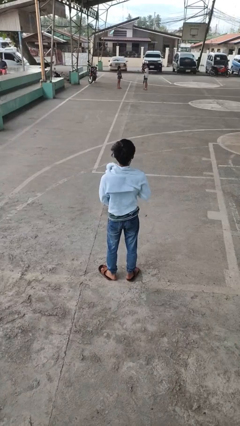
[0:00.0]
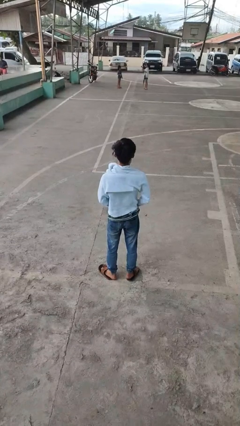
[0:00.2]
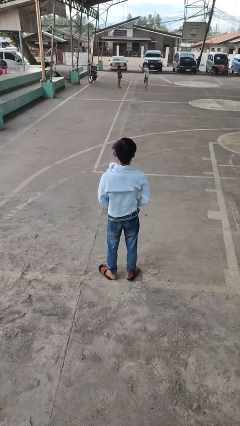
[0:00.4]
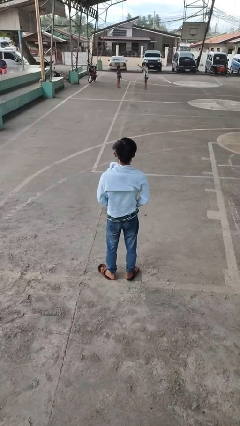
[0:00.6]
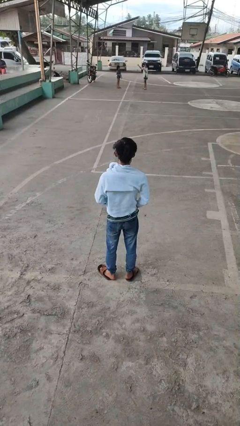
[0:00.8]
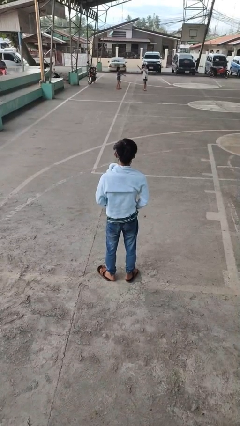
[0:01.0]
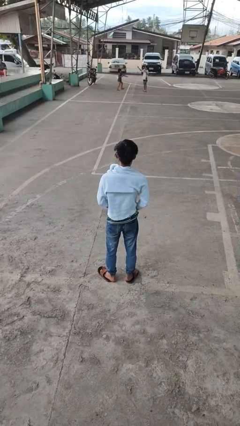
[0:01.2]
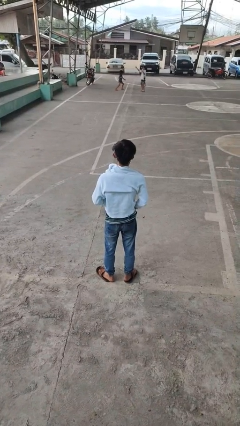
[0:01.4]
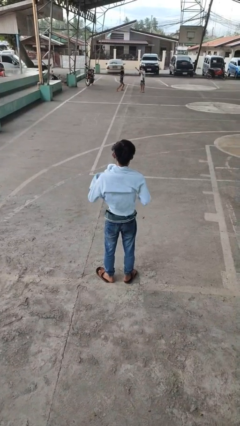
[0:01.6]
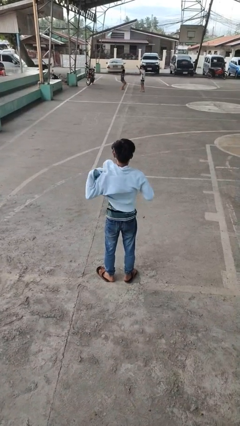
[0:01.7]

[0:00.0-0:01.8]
person unzips jacket

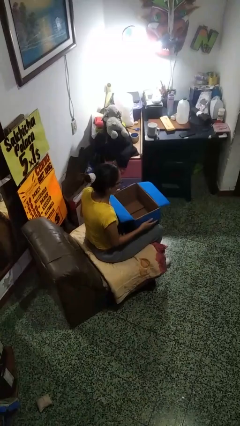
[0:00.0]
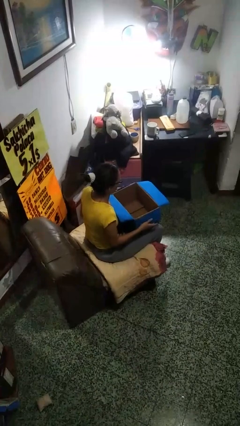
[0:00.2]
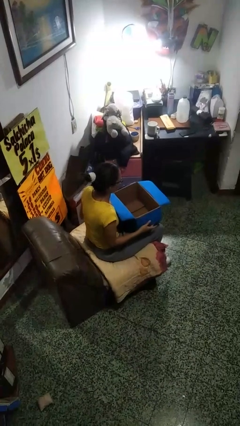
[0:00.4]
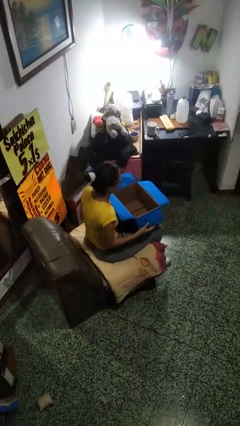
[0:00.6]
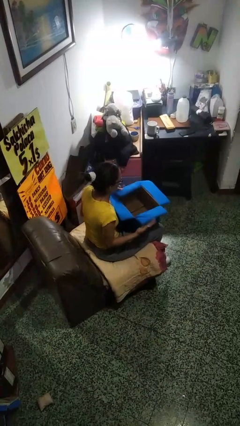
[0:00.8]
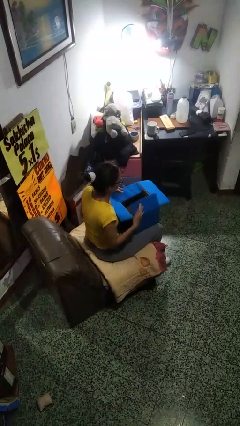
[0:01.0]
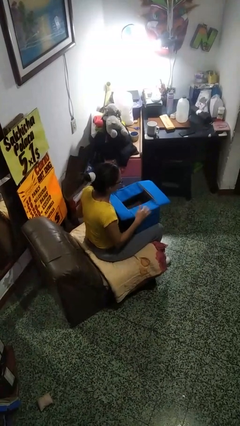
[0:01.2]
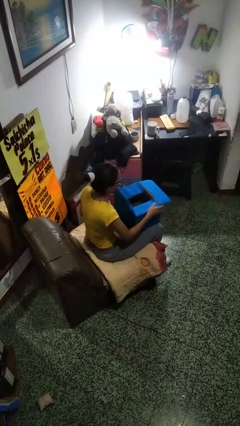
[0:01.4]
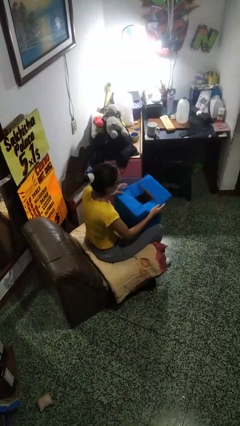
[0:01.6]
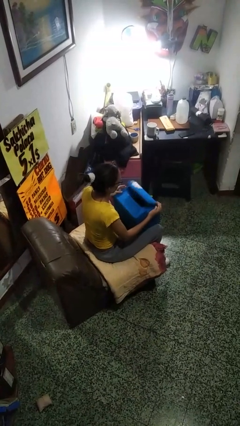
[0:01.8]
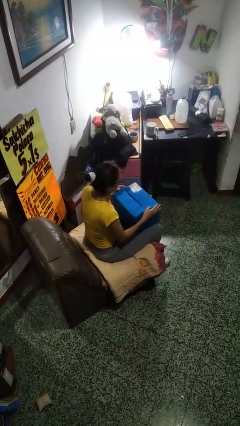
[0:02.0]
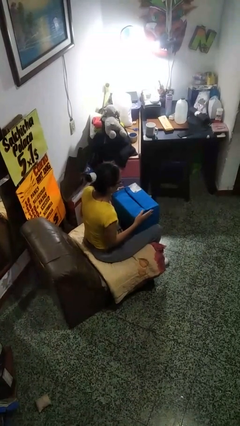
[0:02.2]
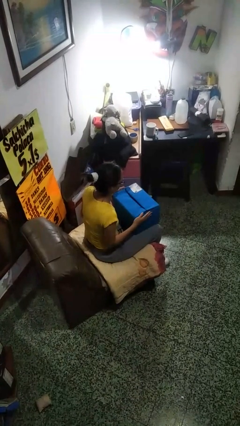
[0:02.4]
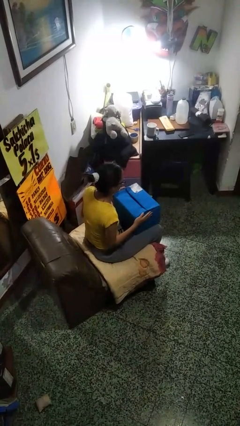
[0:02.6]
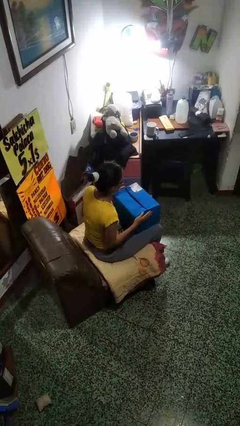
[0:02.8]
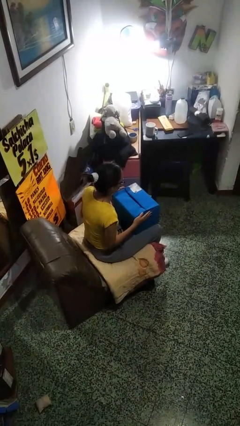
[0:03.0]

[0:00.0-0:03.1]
person closes box

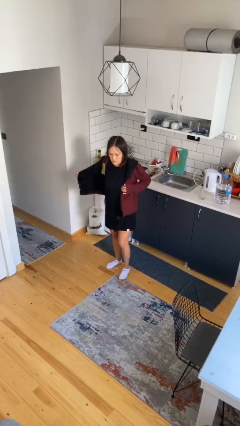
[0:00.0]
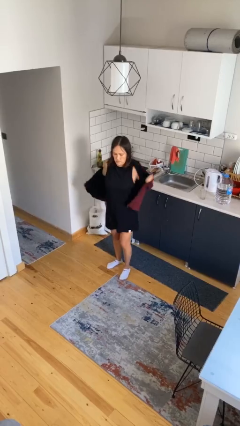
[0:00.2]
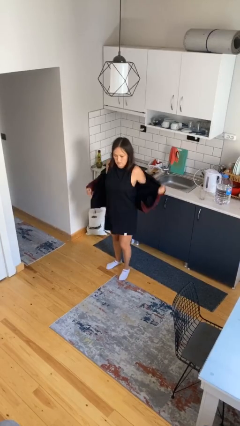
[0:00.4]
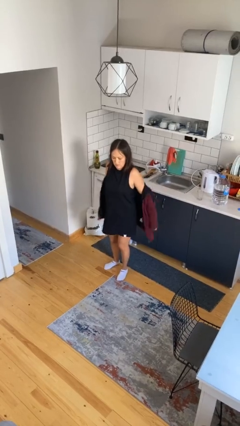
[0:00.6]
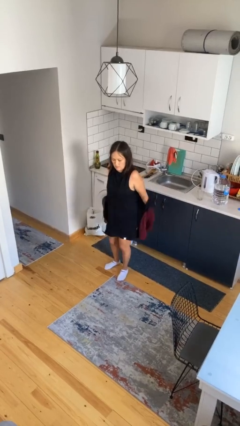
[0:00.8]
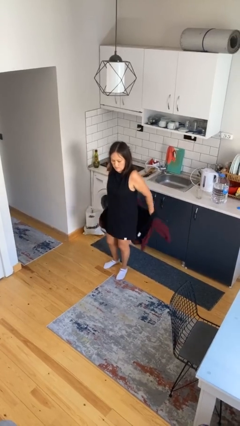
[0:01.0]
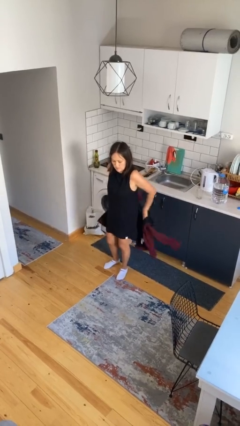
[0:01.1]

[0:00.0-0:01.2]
person takes off jacket

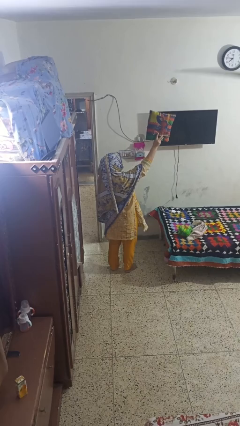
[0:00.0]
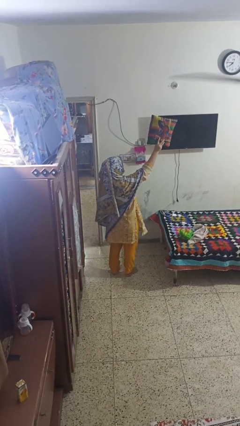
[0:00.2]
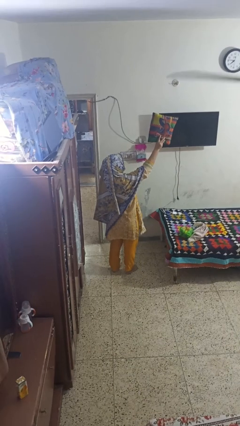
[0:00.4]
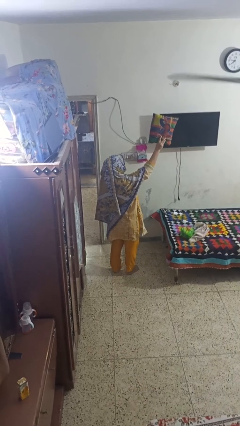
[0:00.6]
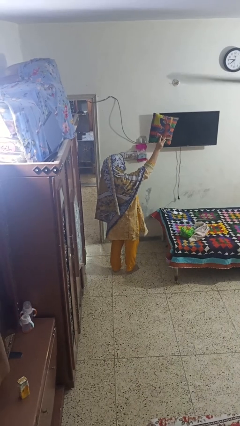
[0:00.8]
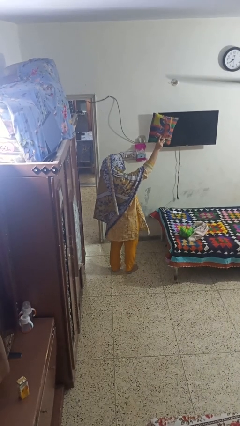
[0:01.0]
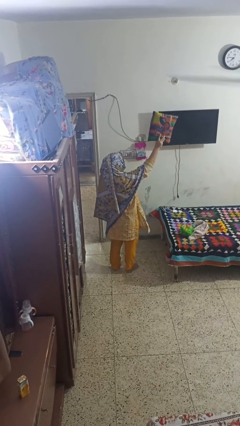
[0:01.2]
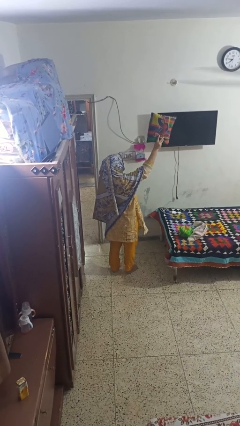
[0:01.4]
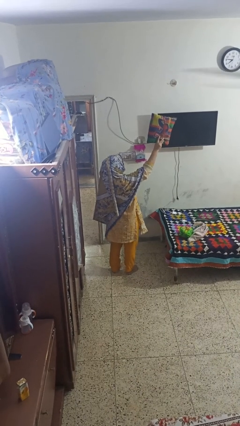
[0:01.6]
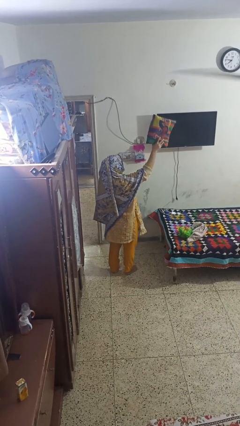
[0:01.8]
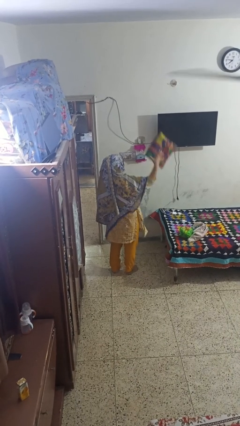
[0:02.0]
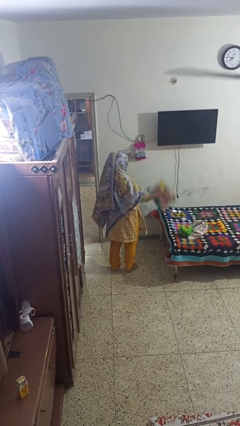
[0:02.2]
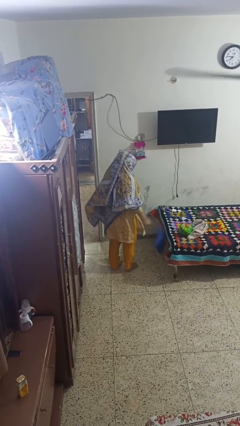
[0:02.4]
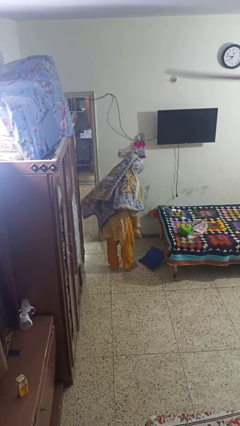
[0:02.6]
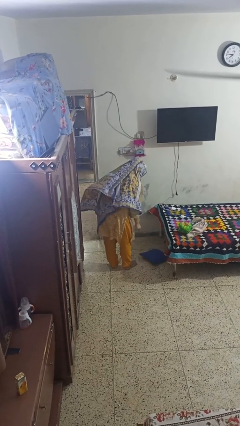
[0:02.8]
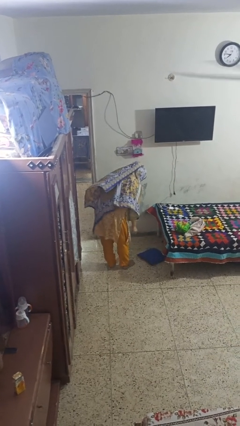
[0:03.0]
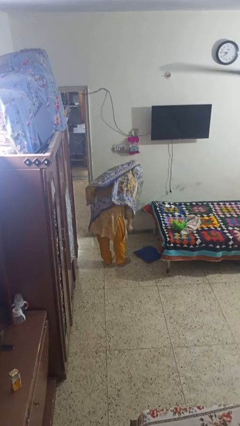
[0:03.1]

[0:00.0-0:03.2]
person drops object

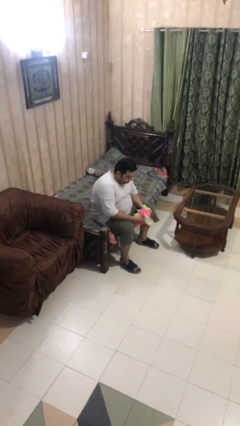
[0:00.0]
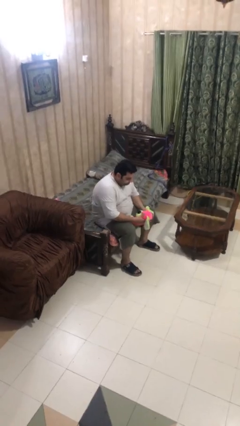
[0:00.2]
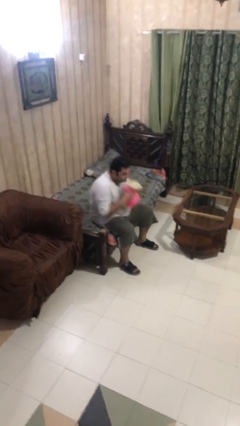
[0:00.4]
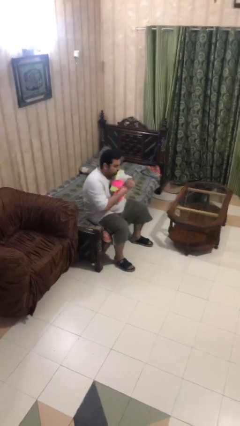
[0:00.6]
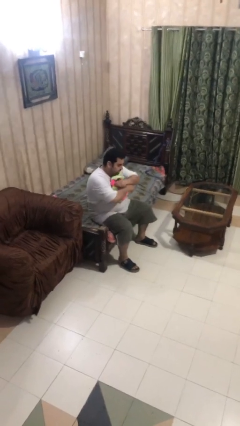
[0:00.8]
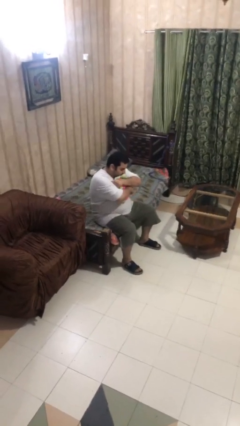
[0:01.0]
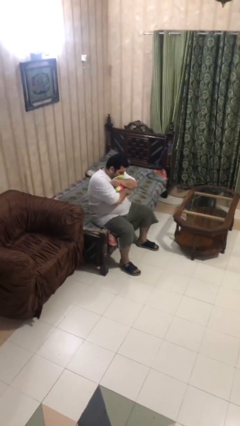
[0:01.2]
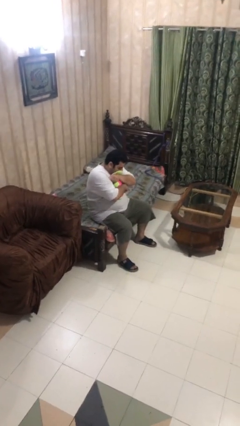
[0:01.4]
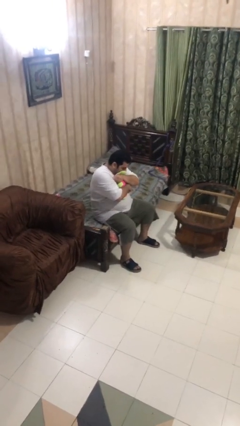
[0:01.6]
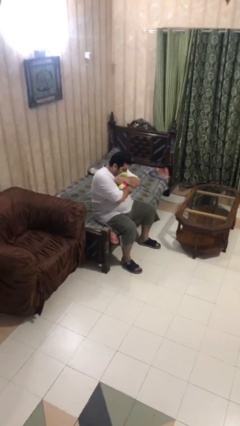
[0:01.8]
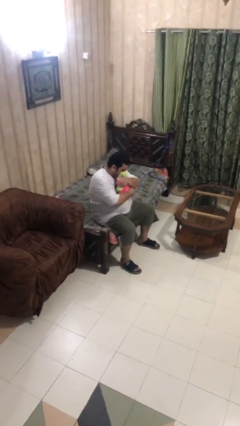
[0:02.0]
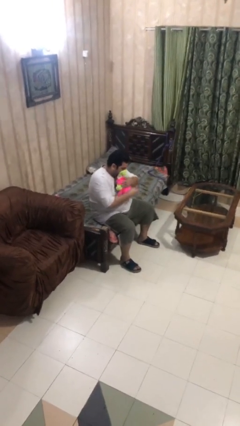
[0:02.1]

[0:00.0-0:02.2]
person hugs stuffed animal

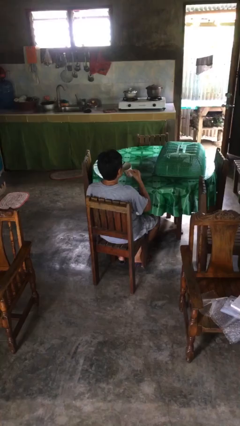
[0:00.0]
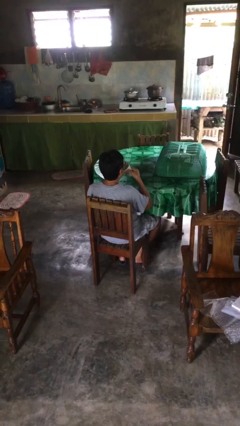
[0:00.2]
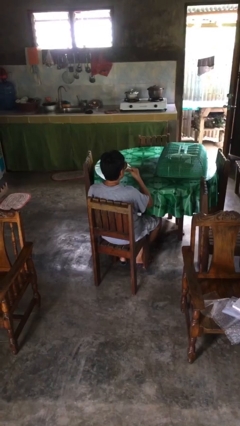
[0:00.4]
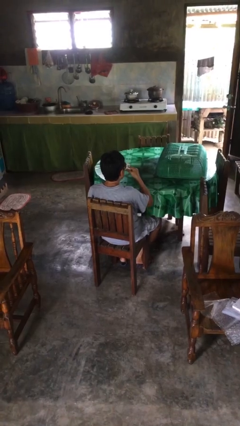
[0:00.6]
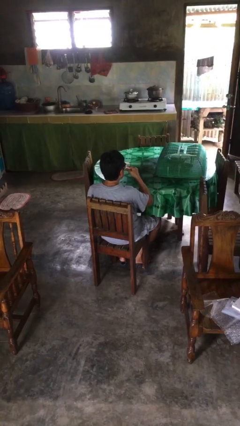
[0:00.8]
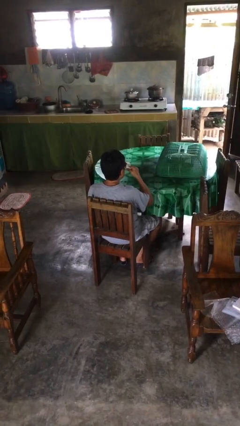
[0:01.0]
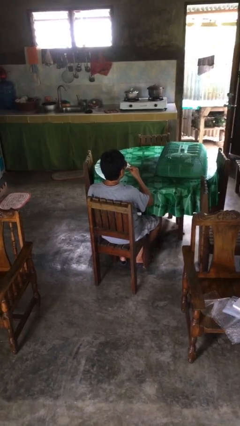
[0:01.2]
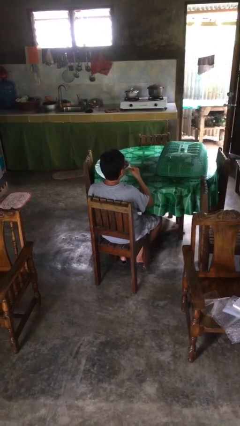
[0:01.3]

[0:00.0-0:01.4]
person drinks from mug

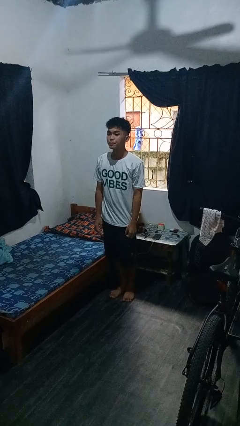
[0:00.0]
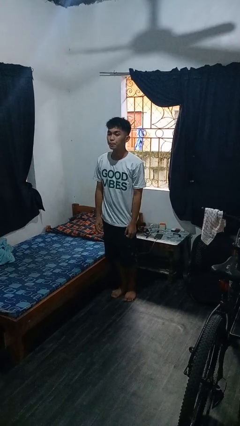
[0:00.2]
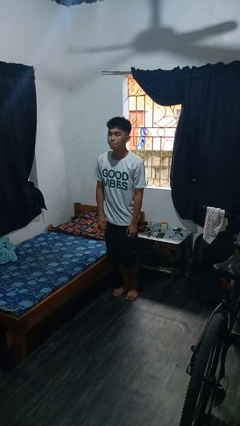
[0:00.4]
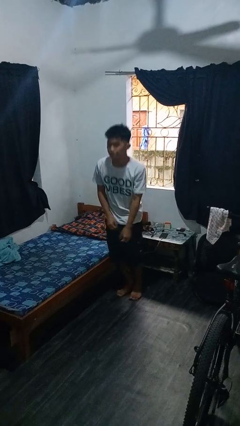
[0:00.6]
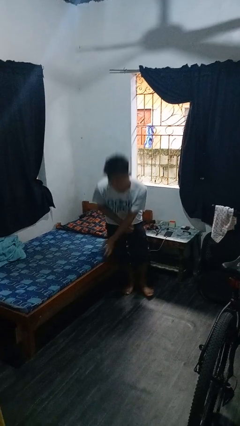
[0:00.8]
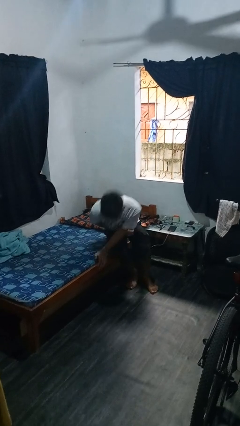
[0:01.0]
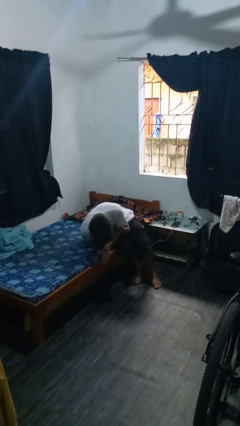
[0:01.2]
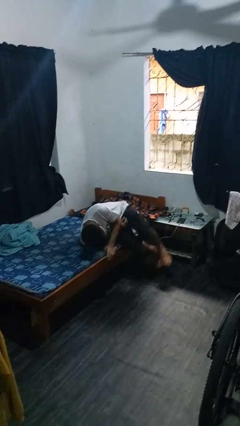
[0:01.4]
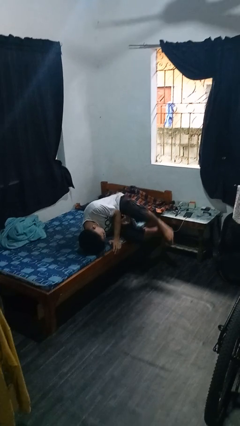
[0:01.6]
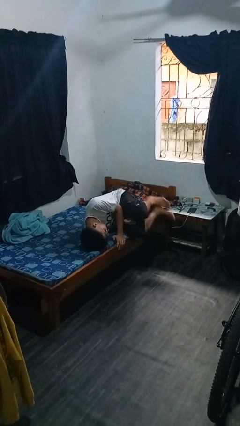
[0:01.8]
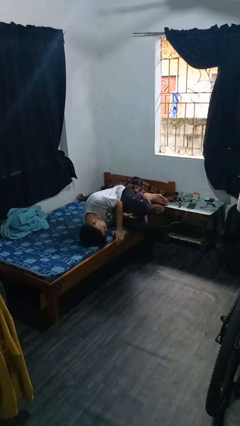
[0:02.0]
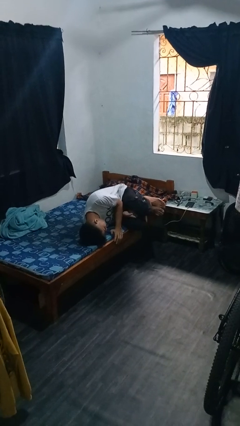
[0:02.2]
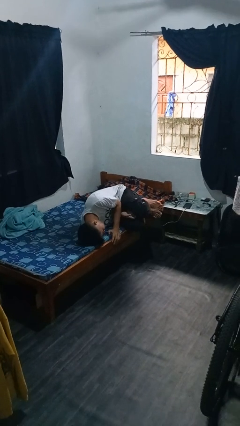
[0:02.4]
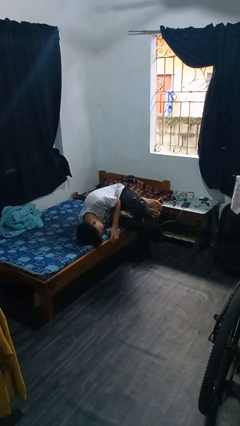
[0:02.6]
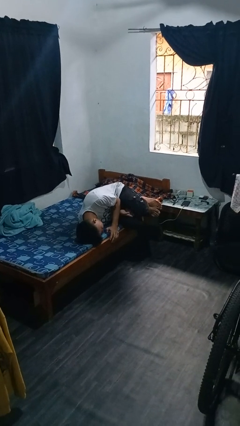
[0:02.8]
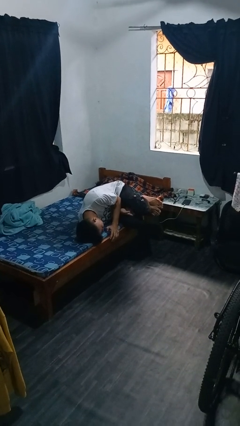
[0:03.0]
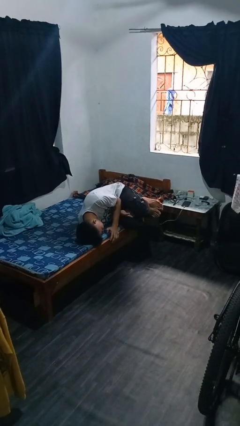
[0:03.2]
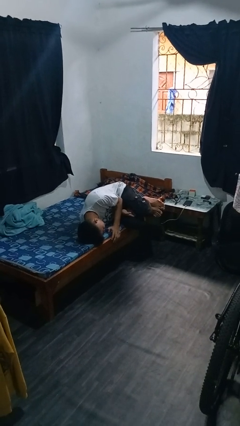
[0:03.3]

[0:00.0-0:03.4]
person lies down on bed

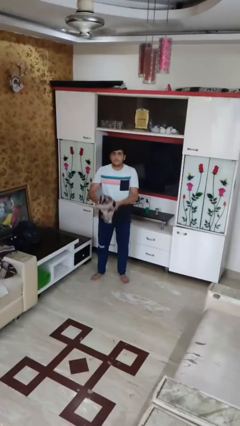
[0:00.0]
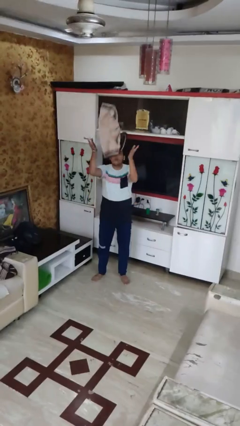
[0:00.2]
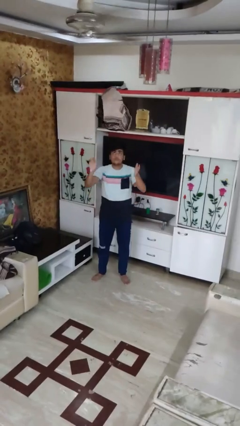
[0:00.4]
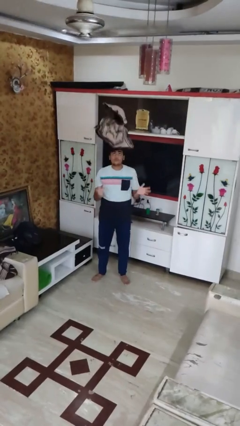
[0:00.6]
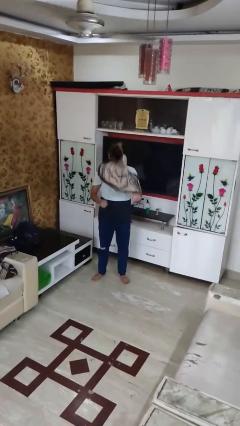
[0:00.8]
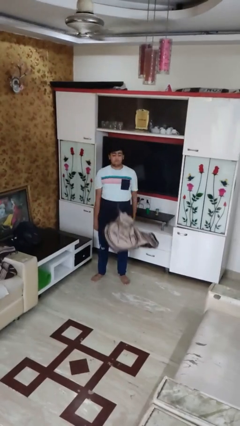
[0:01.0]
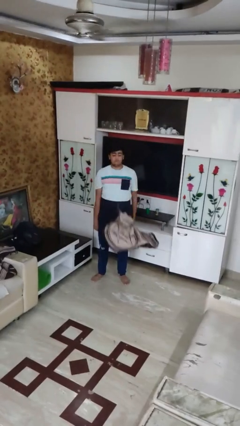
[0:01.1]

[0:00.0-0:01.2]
person throws object into air

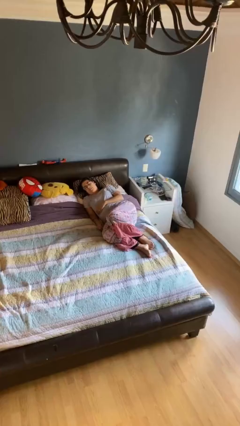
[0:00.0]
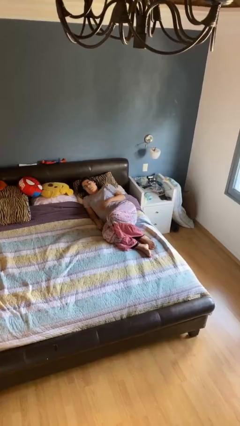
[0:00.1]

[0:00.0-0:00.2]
person stands up
